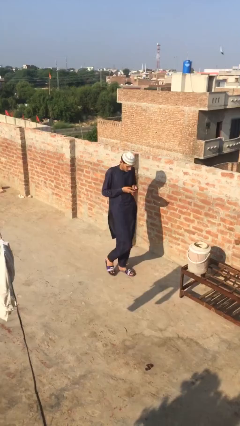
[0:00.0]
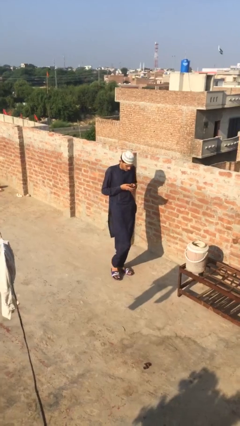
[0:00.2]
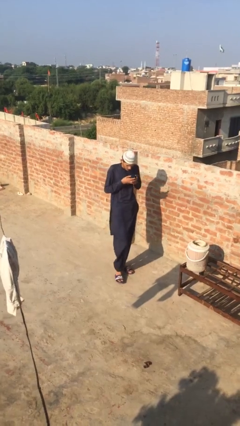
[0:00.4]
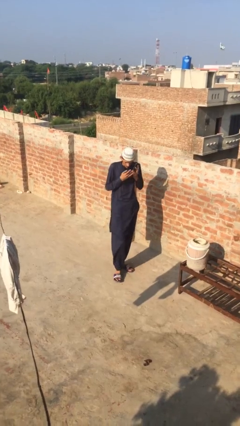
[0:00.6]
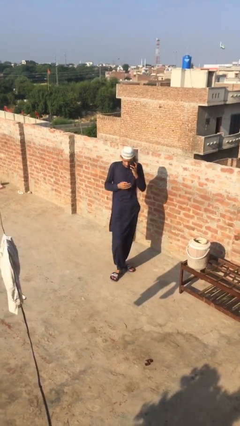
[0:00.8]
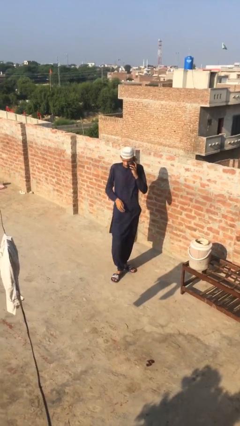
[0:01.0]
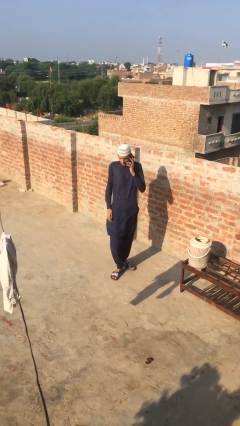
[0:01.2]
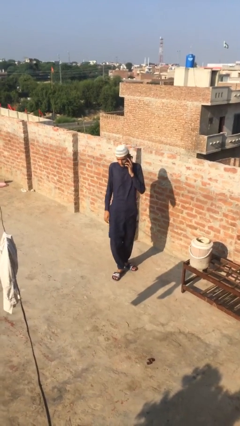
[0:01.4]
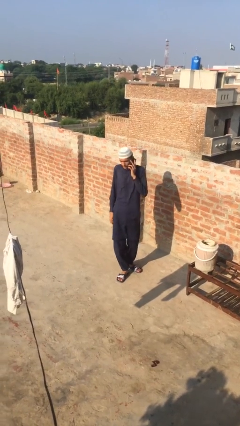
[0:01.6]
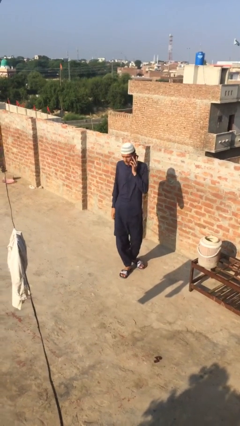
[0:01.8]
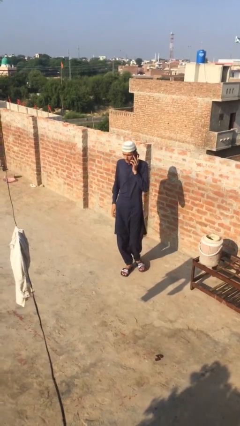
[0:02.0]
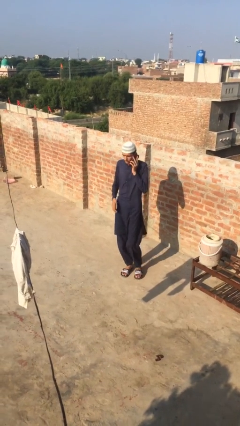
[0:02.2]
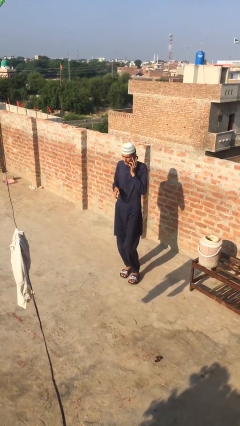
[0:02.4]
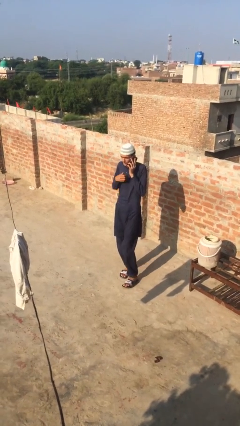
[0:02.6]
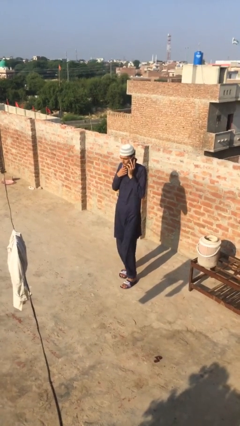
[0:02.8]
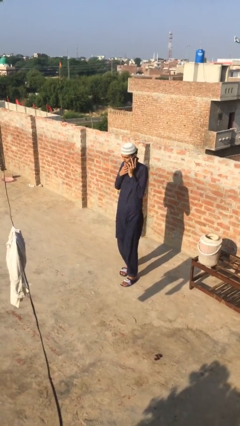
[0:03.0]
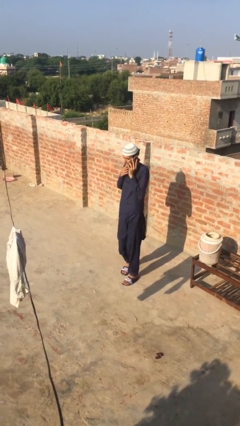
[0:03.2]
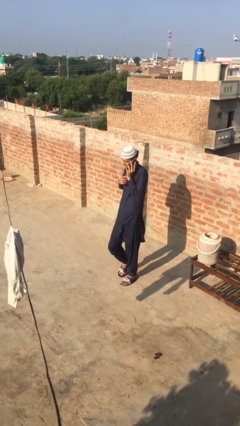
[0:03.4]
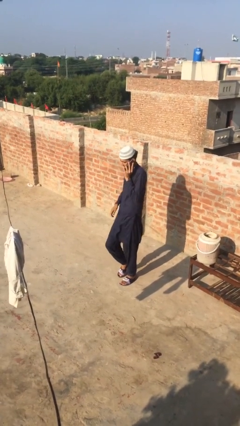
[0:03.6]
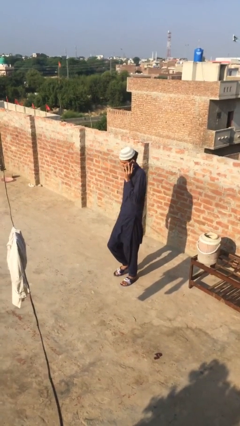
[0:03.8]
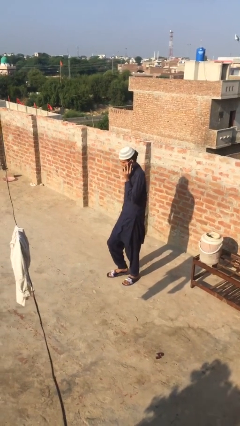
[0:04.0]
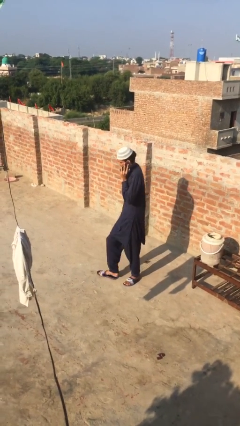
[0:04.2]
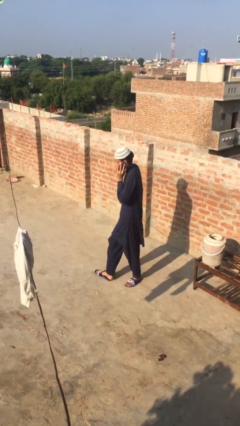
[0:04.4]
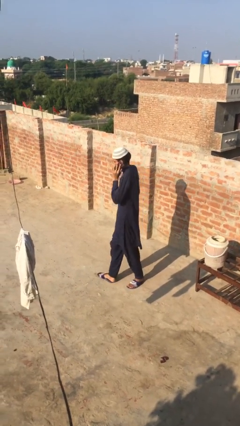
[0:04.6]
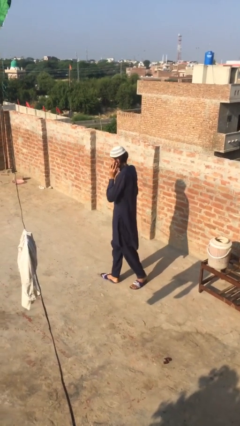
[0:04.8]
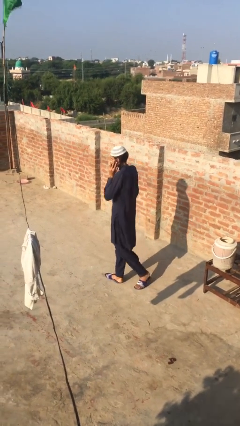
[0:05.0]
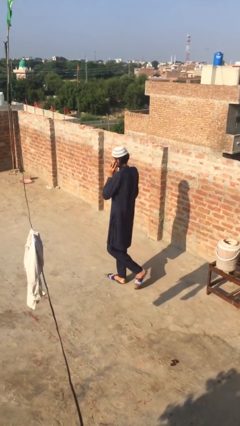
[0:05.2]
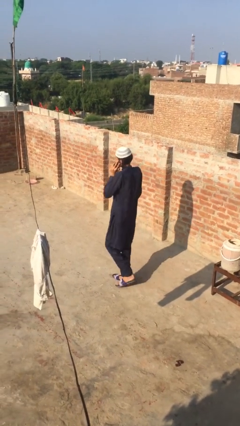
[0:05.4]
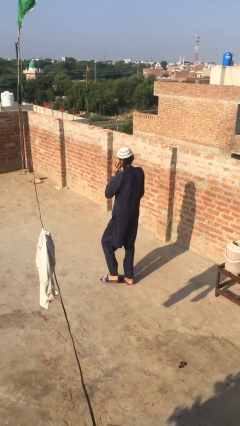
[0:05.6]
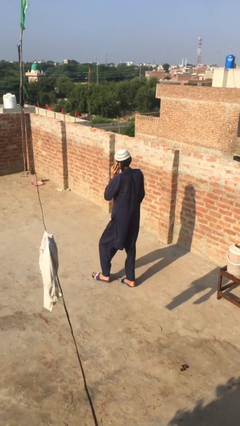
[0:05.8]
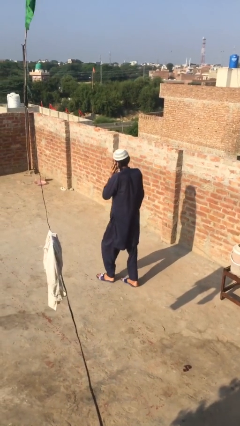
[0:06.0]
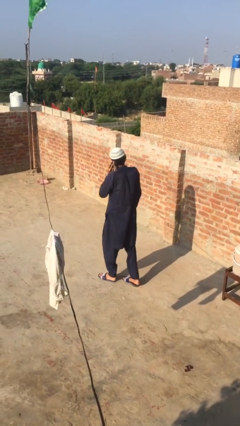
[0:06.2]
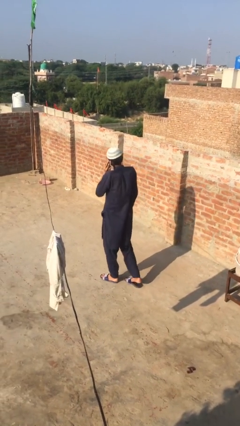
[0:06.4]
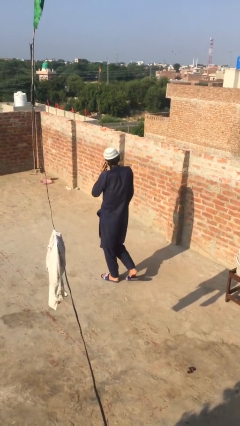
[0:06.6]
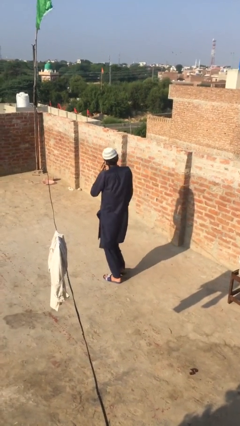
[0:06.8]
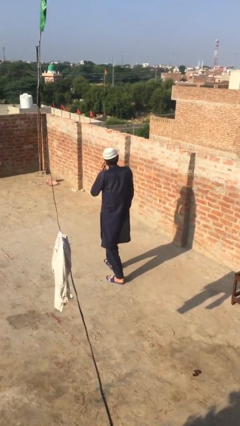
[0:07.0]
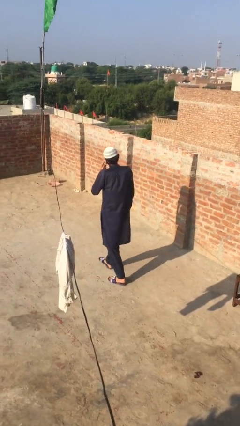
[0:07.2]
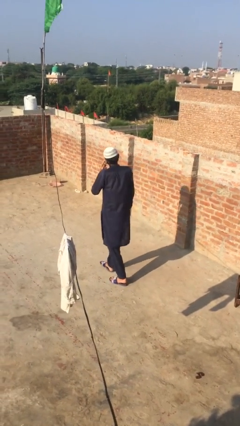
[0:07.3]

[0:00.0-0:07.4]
person talks on phone

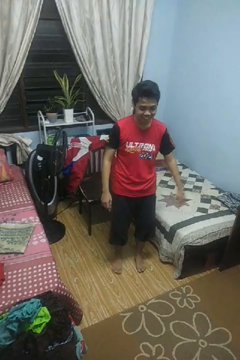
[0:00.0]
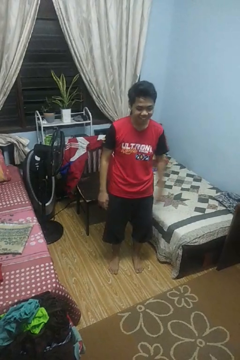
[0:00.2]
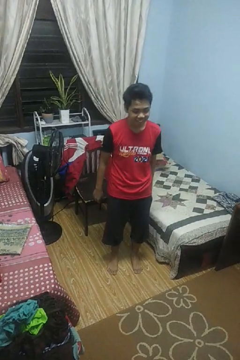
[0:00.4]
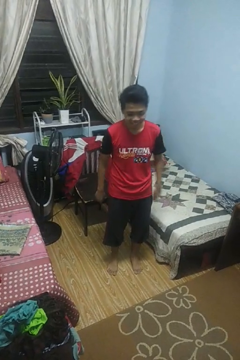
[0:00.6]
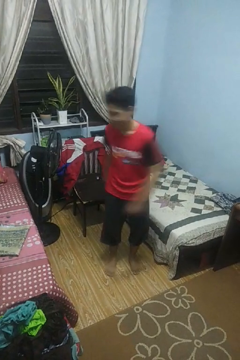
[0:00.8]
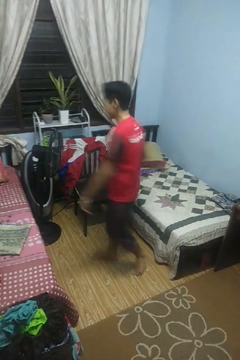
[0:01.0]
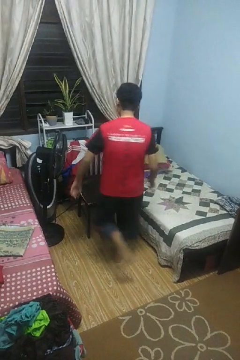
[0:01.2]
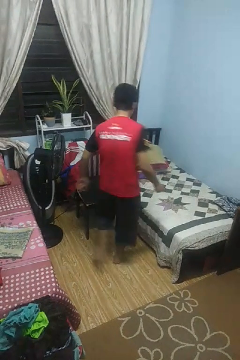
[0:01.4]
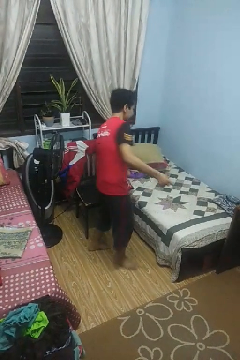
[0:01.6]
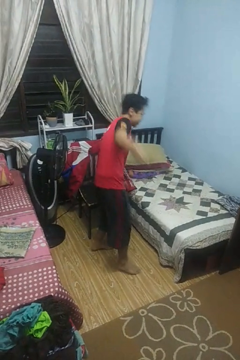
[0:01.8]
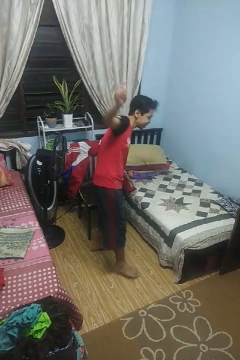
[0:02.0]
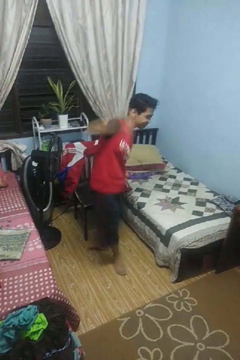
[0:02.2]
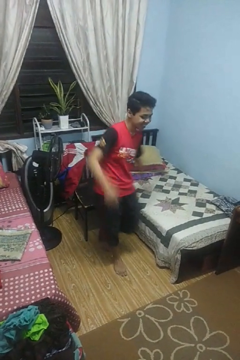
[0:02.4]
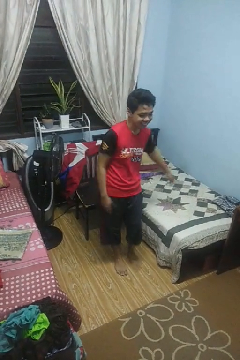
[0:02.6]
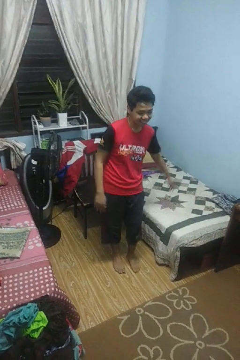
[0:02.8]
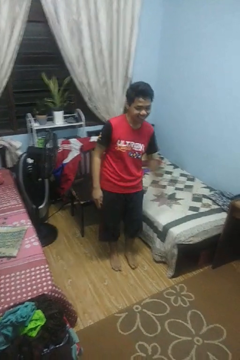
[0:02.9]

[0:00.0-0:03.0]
person twirls

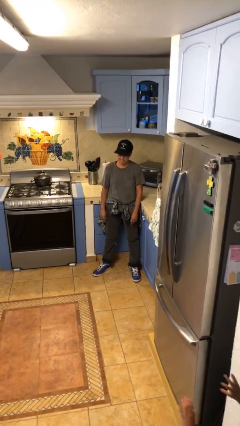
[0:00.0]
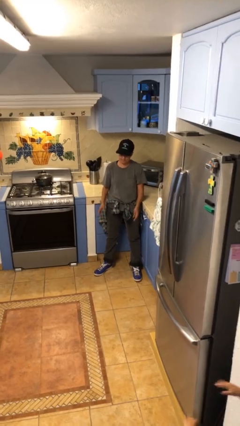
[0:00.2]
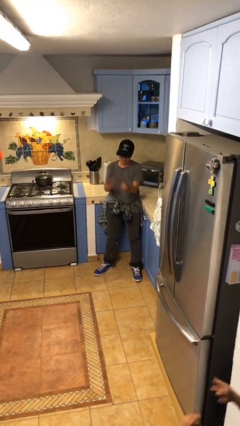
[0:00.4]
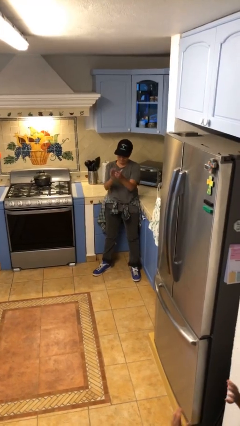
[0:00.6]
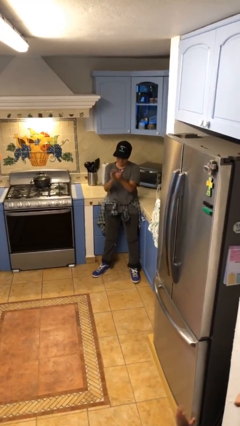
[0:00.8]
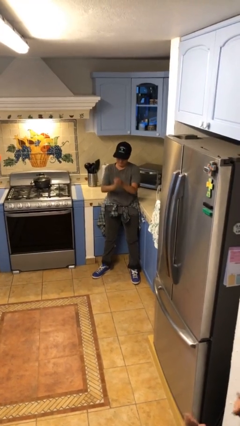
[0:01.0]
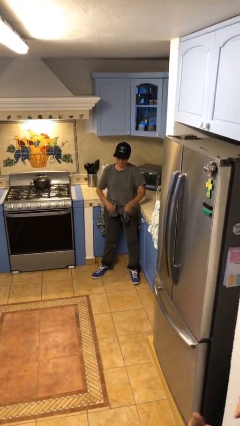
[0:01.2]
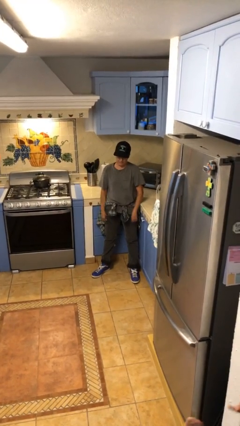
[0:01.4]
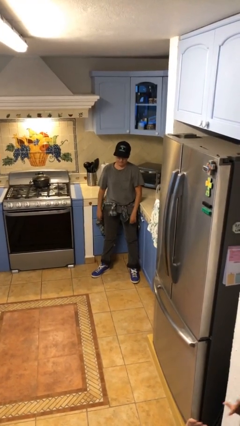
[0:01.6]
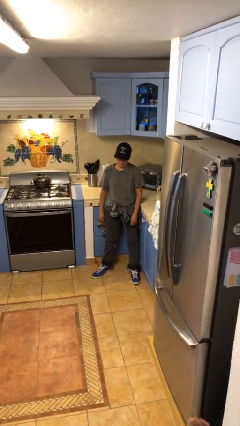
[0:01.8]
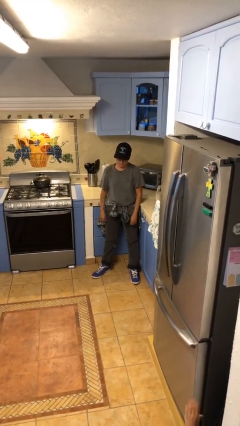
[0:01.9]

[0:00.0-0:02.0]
person claps hands

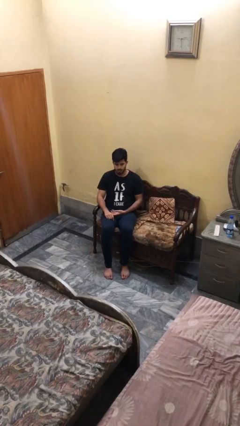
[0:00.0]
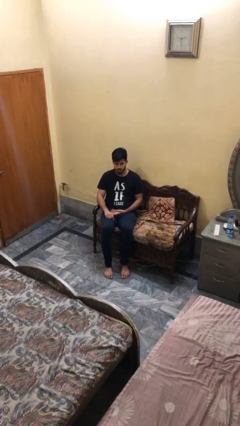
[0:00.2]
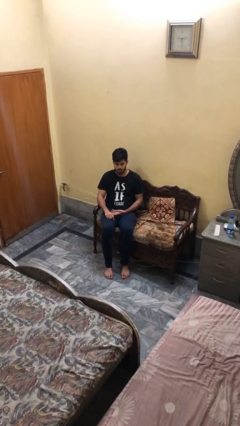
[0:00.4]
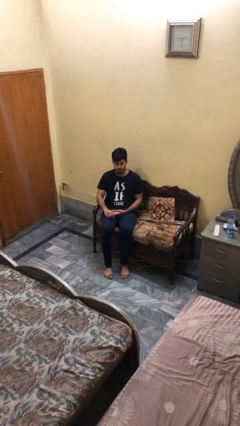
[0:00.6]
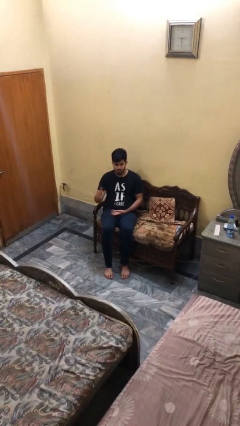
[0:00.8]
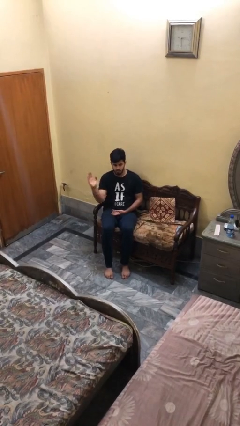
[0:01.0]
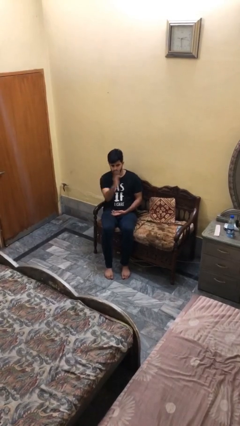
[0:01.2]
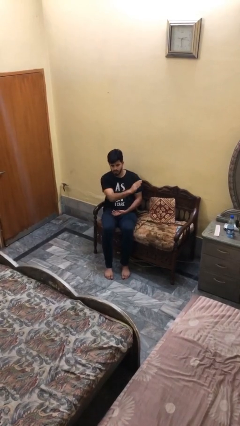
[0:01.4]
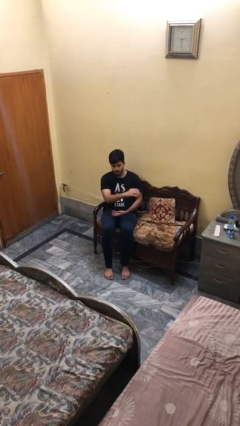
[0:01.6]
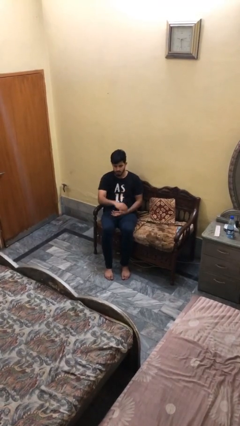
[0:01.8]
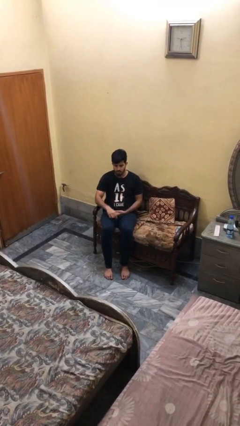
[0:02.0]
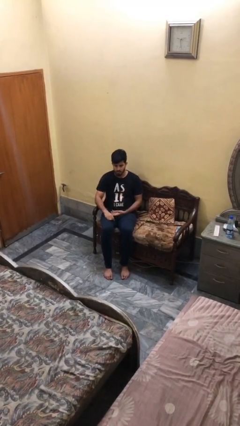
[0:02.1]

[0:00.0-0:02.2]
person gestures swipe left

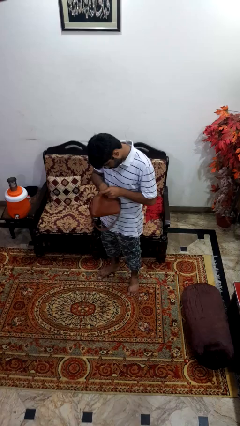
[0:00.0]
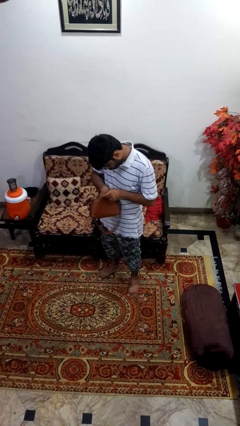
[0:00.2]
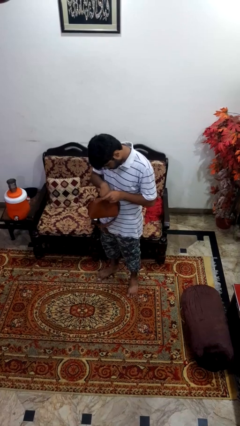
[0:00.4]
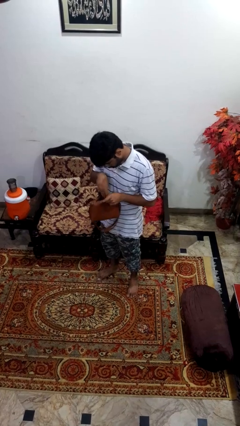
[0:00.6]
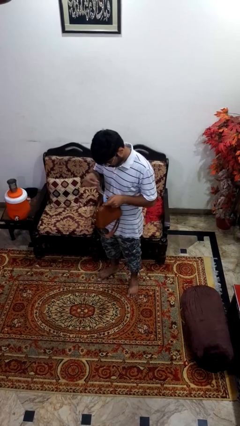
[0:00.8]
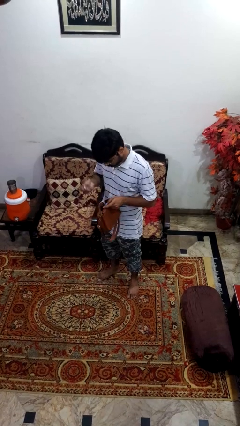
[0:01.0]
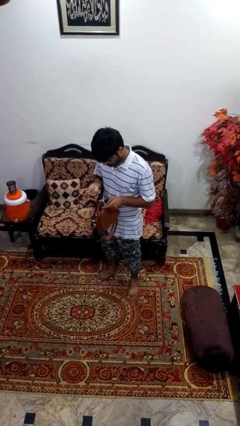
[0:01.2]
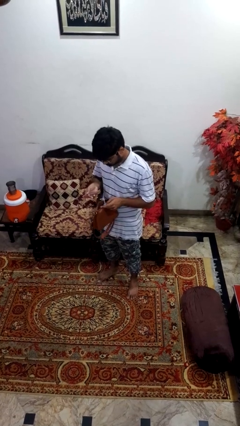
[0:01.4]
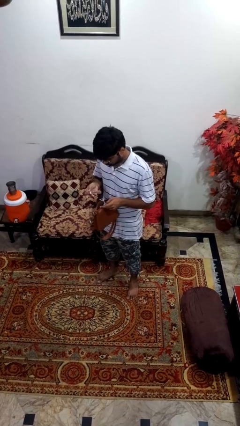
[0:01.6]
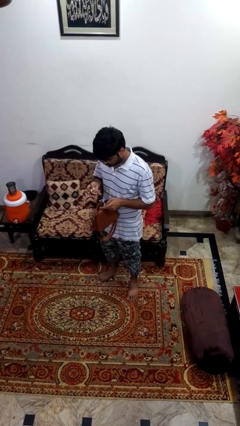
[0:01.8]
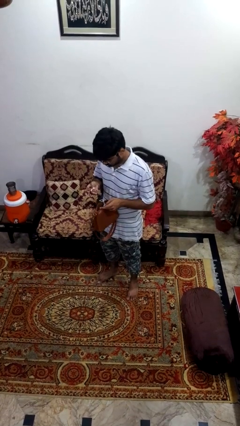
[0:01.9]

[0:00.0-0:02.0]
person takes object from purse

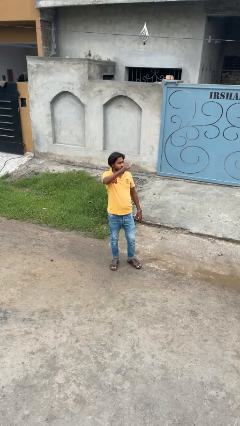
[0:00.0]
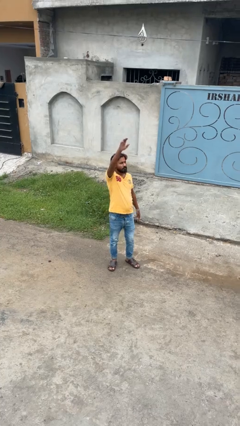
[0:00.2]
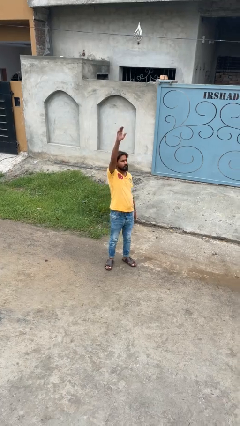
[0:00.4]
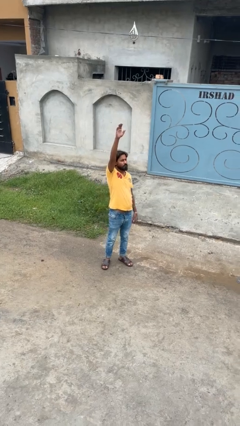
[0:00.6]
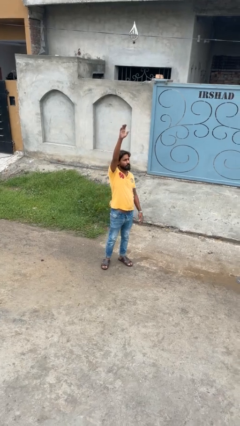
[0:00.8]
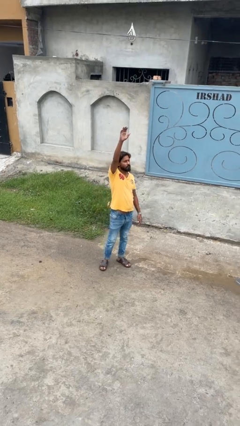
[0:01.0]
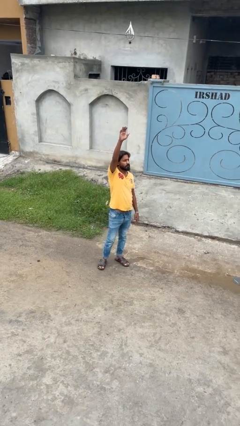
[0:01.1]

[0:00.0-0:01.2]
person gestures raise hand

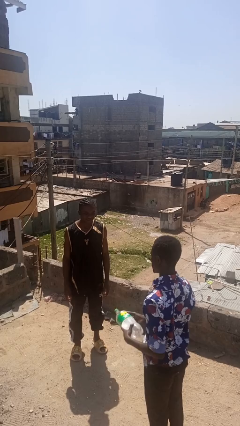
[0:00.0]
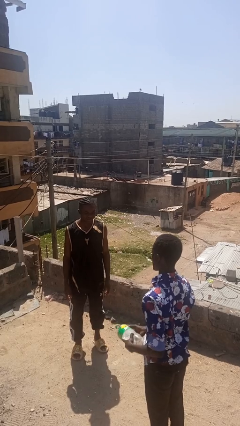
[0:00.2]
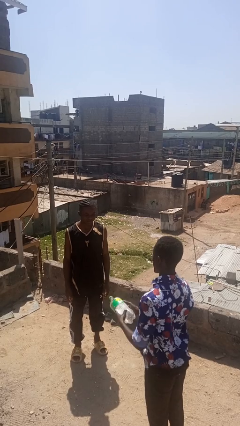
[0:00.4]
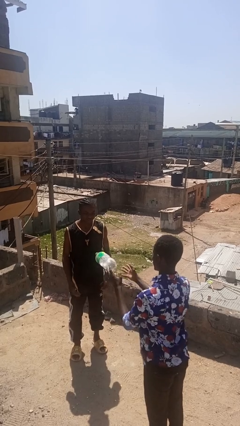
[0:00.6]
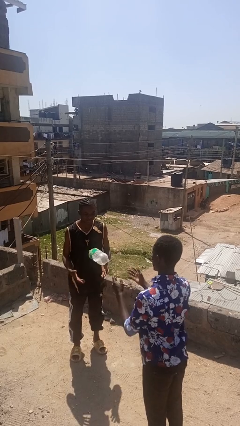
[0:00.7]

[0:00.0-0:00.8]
person throws object to person
